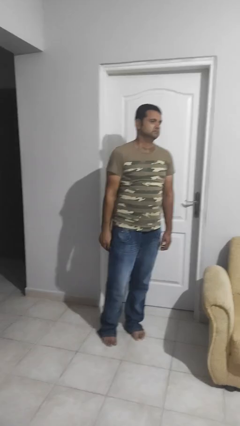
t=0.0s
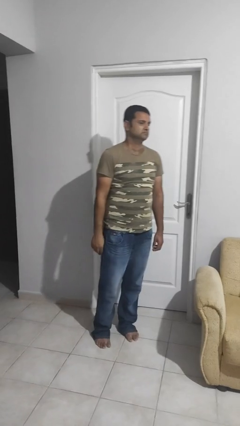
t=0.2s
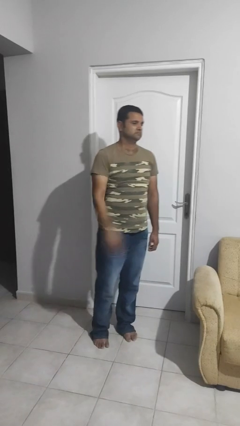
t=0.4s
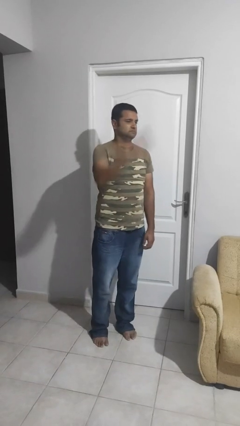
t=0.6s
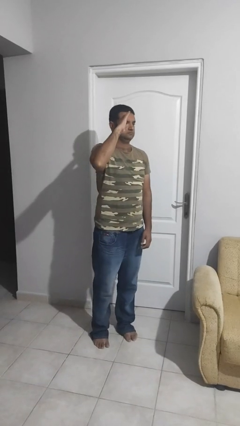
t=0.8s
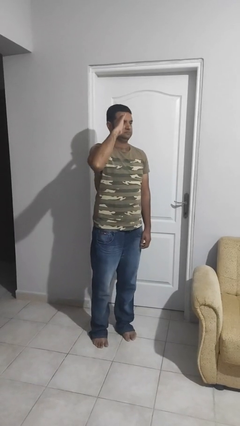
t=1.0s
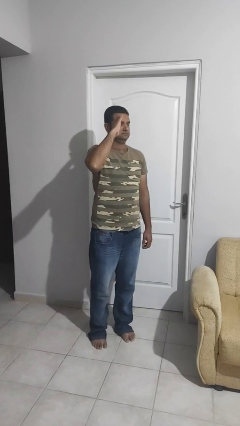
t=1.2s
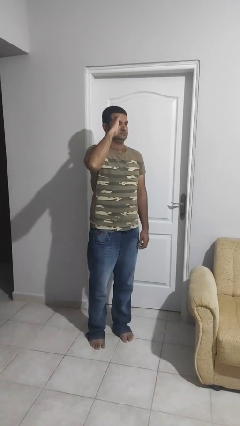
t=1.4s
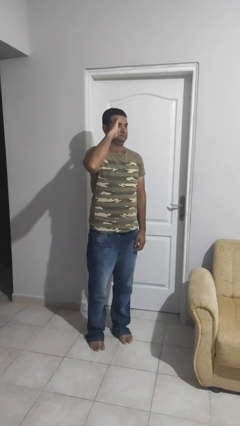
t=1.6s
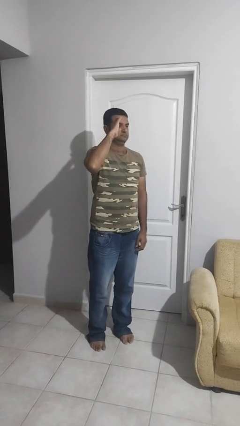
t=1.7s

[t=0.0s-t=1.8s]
person salutes

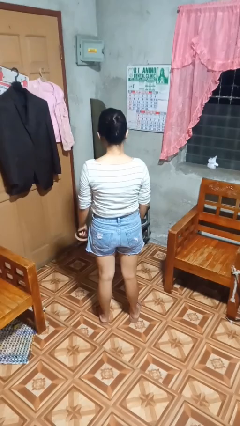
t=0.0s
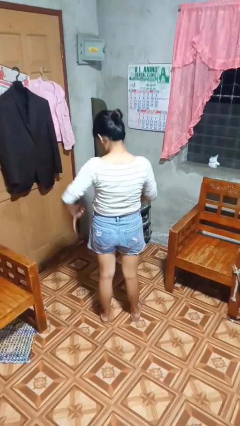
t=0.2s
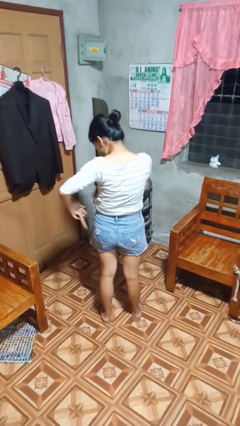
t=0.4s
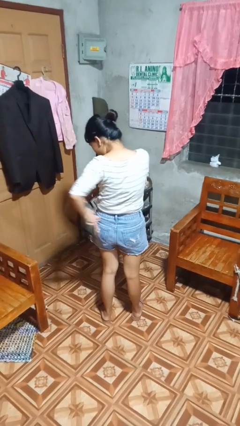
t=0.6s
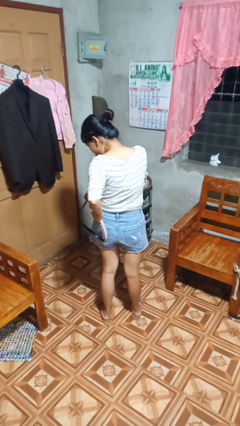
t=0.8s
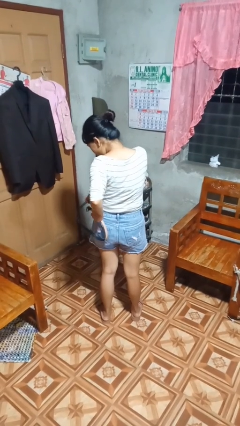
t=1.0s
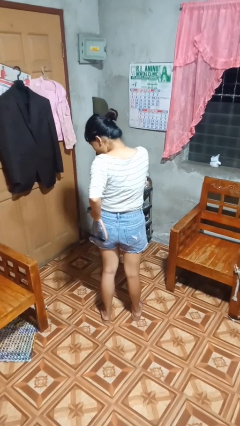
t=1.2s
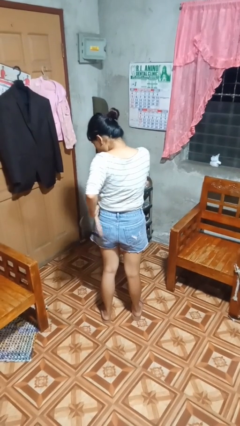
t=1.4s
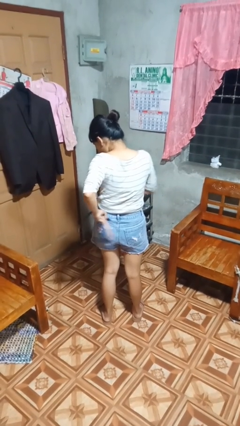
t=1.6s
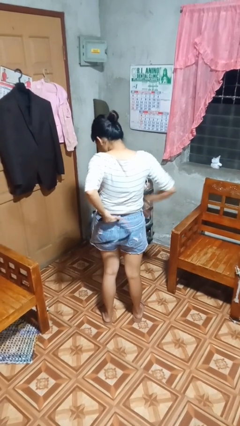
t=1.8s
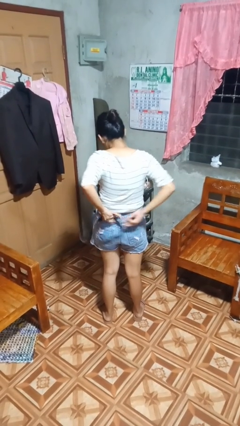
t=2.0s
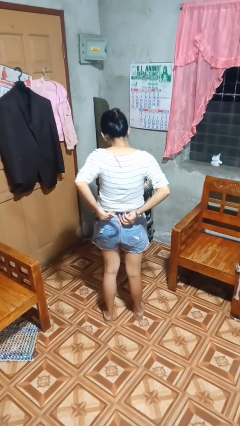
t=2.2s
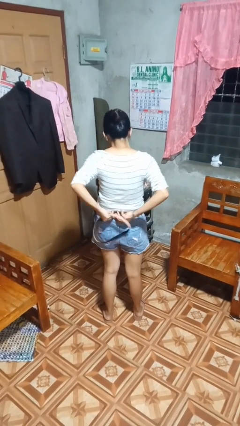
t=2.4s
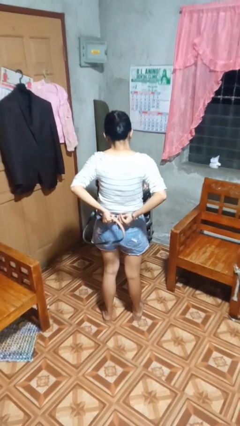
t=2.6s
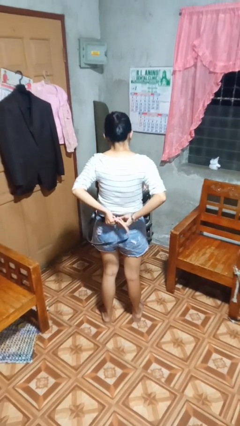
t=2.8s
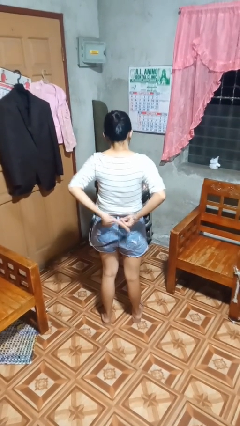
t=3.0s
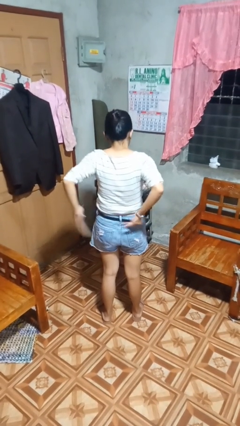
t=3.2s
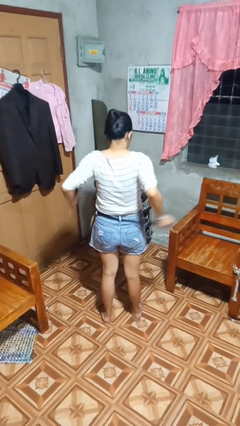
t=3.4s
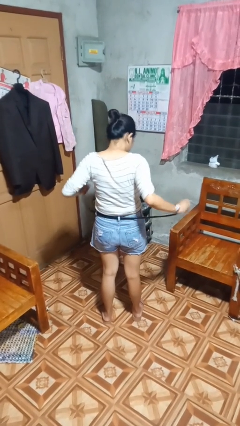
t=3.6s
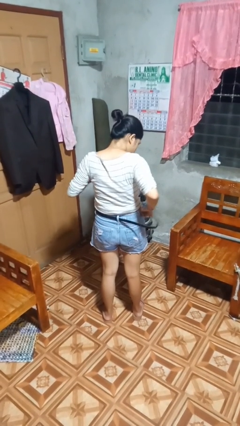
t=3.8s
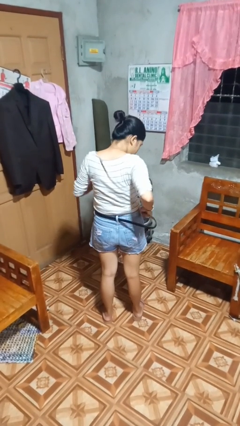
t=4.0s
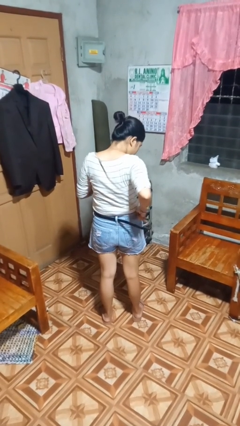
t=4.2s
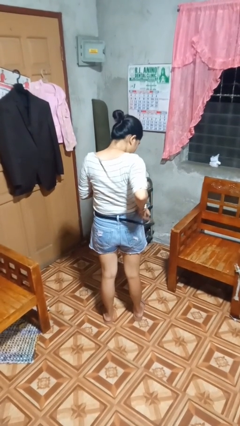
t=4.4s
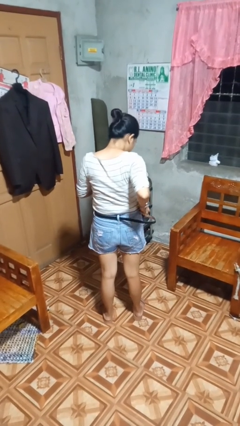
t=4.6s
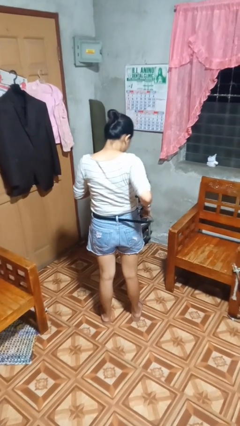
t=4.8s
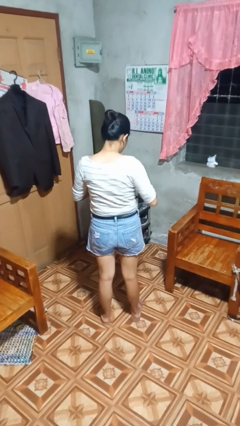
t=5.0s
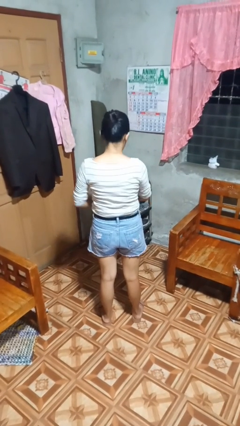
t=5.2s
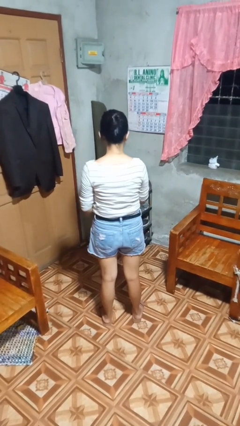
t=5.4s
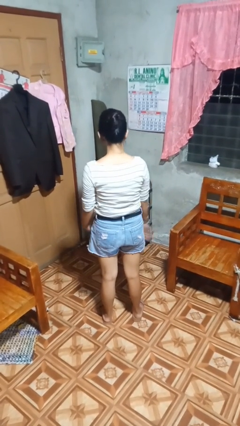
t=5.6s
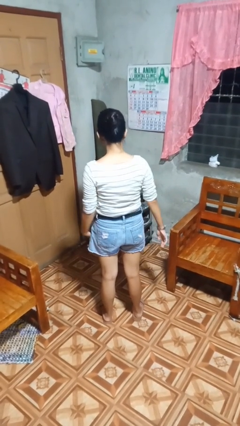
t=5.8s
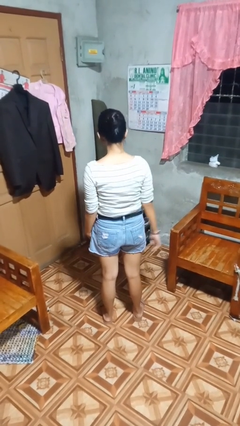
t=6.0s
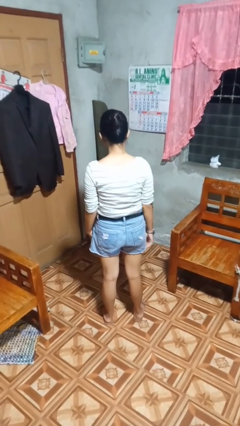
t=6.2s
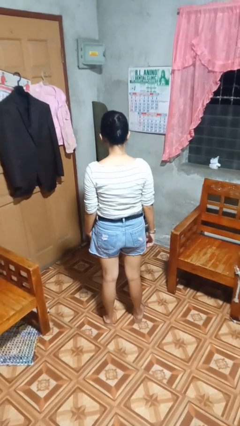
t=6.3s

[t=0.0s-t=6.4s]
person puts on belt

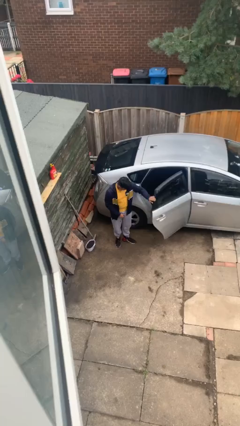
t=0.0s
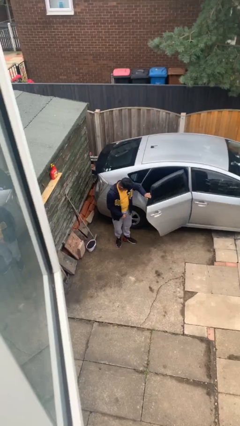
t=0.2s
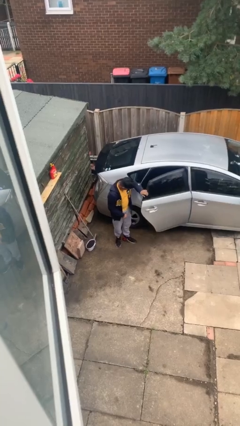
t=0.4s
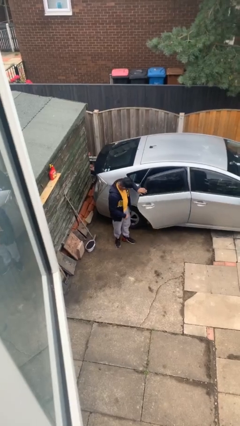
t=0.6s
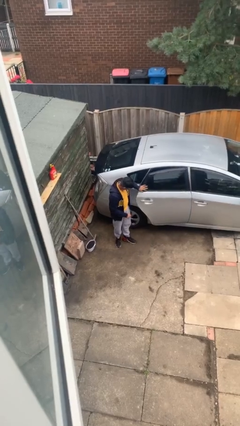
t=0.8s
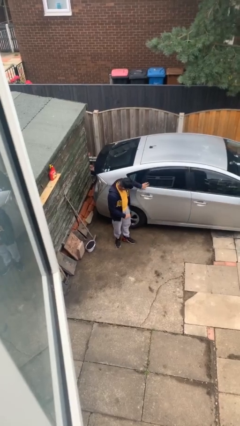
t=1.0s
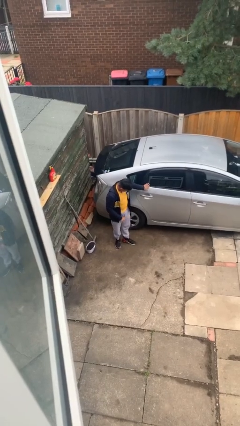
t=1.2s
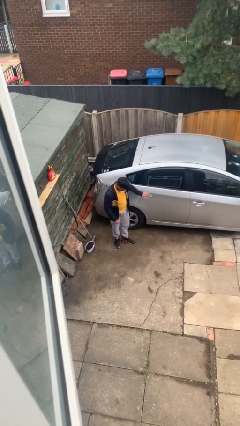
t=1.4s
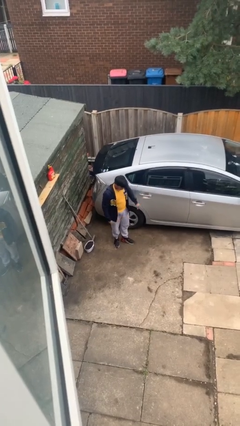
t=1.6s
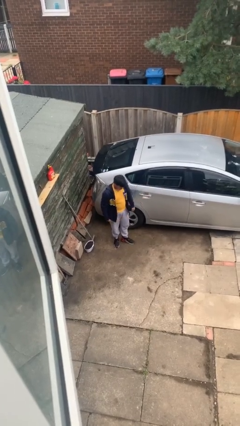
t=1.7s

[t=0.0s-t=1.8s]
person closes car door

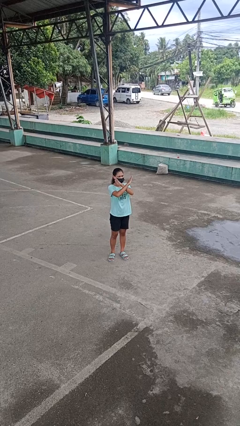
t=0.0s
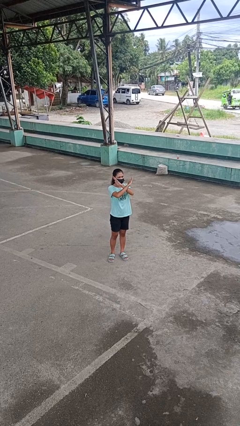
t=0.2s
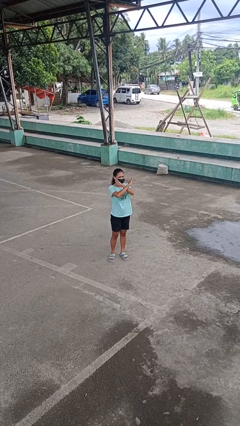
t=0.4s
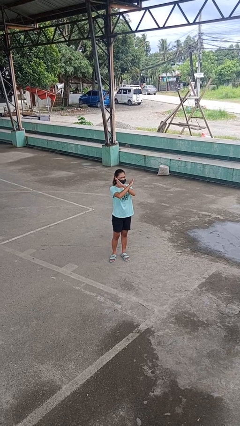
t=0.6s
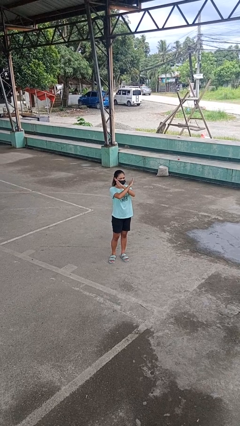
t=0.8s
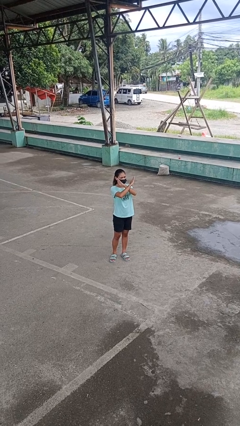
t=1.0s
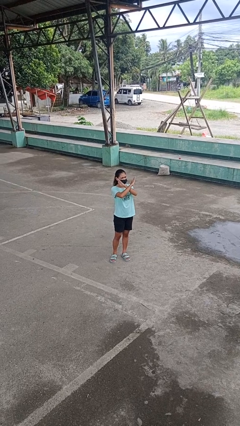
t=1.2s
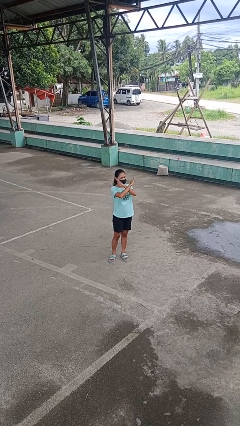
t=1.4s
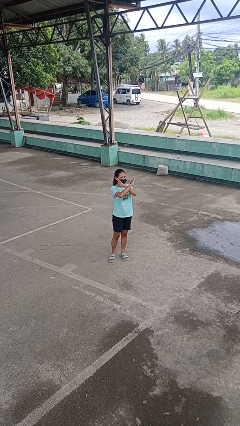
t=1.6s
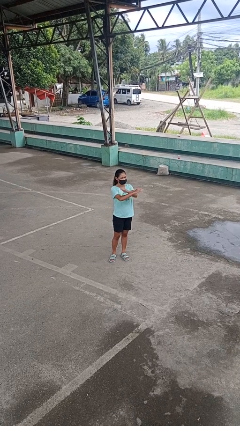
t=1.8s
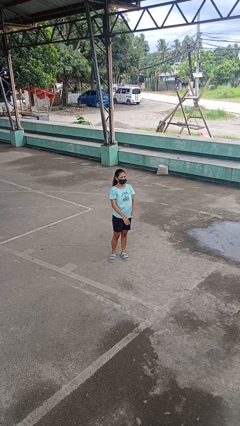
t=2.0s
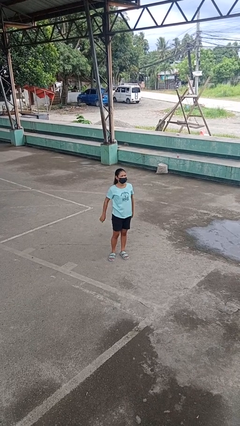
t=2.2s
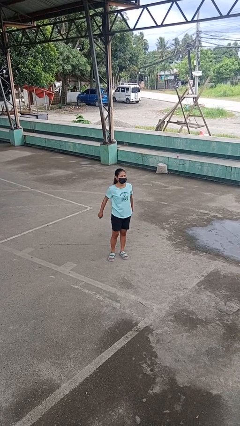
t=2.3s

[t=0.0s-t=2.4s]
person gestures arms x

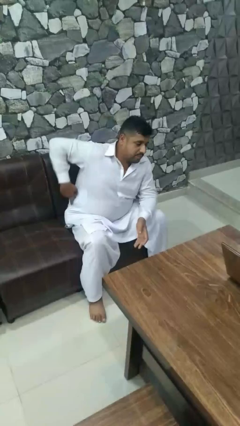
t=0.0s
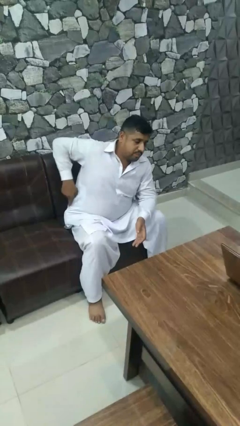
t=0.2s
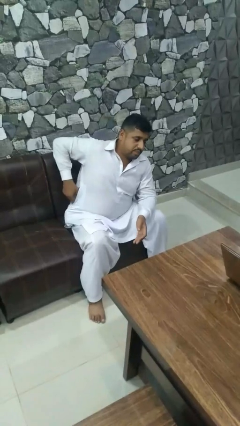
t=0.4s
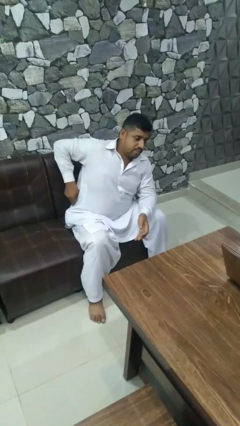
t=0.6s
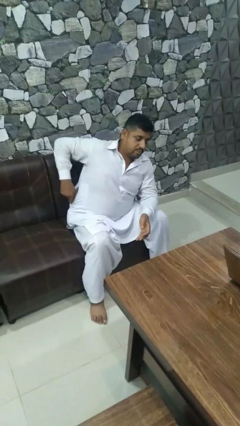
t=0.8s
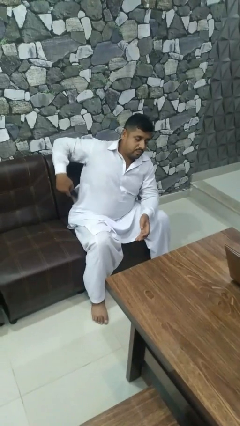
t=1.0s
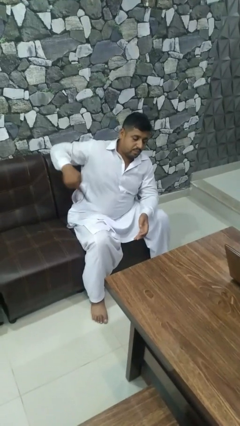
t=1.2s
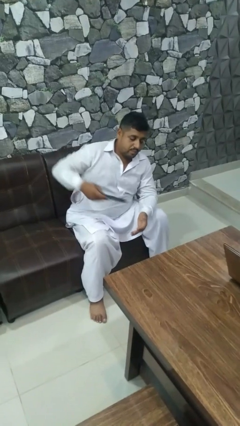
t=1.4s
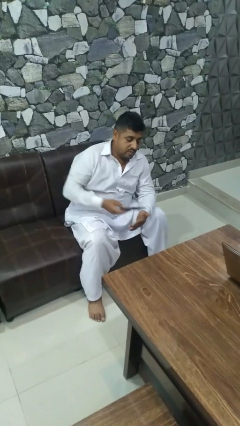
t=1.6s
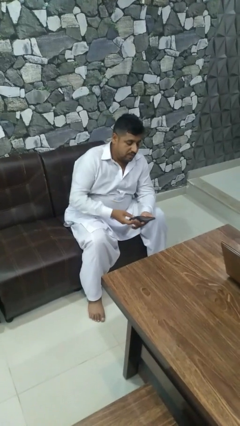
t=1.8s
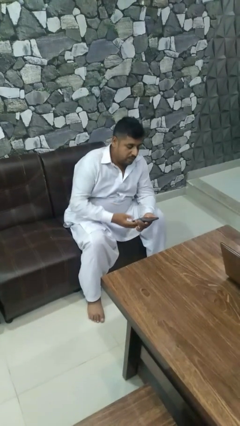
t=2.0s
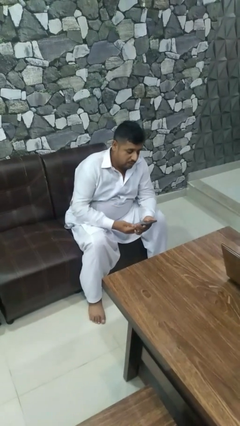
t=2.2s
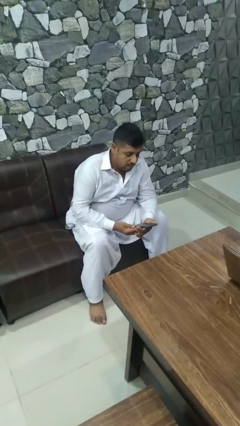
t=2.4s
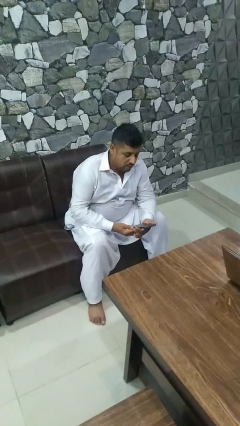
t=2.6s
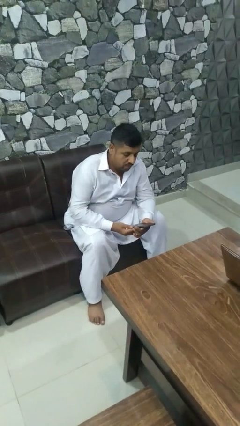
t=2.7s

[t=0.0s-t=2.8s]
person takes phone from pocket

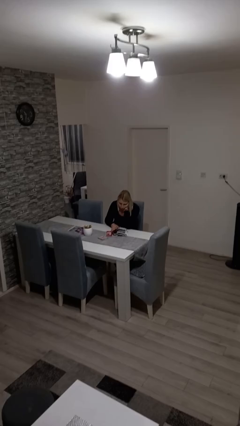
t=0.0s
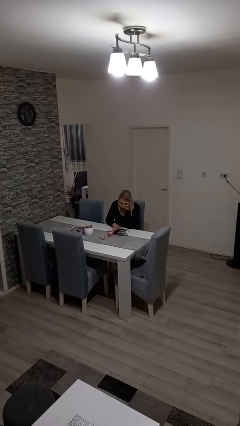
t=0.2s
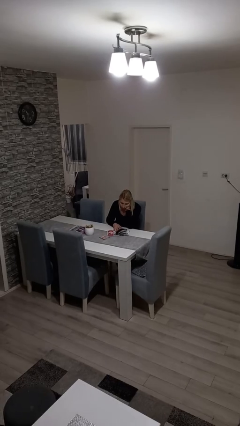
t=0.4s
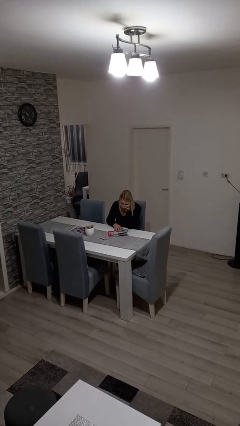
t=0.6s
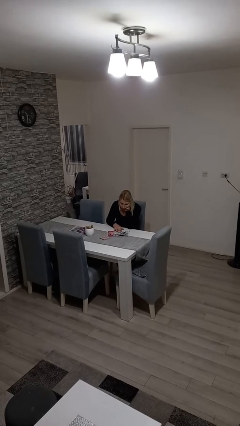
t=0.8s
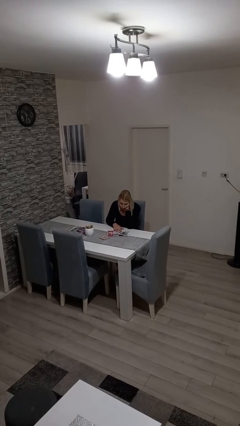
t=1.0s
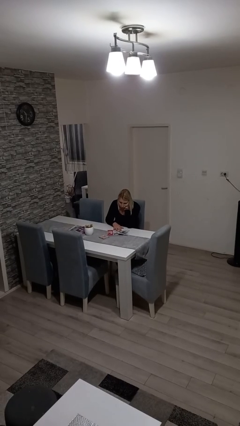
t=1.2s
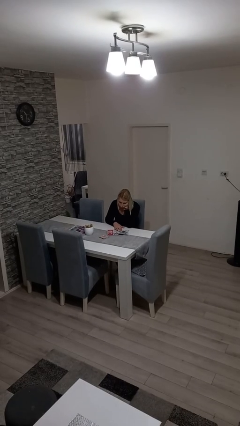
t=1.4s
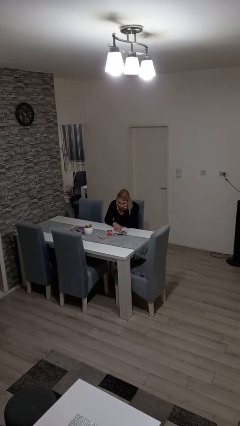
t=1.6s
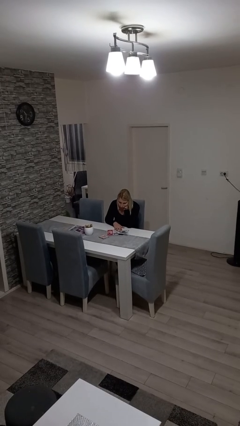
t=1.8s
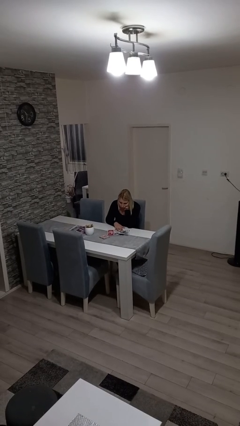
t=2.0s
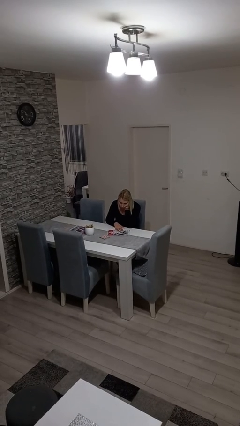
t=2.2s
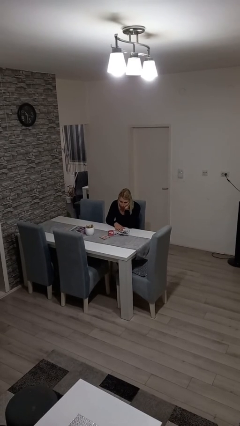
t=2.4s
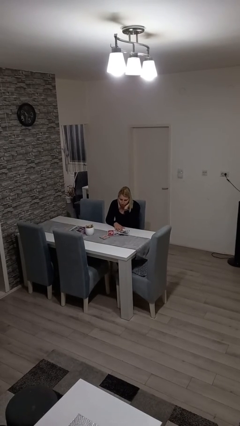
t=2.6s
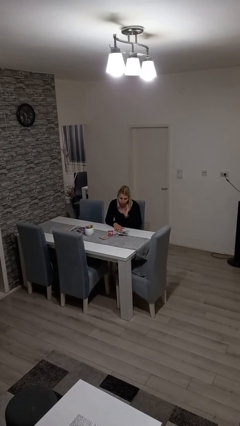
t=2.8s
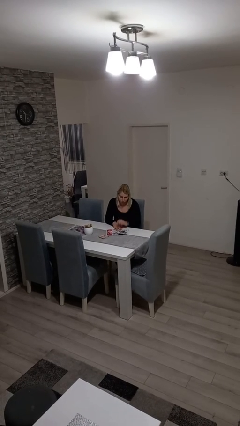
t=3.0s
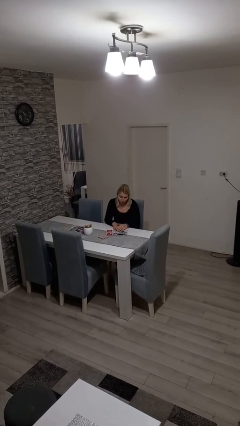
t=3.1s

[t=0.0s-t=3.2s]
person reads magazine
